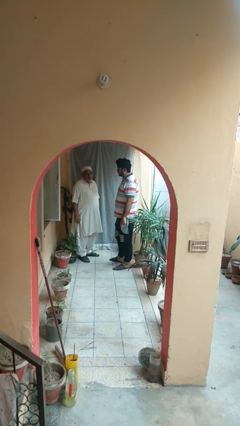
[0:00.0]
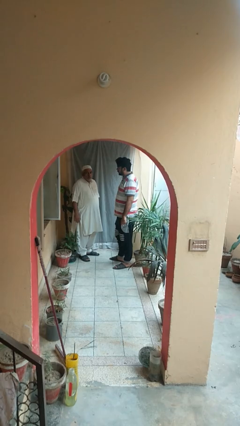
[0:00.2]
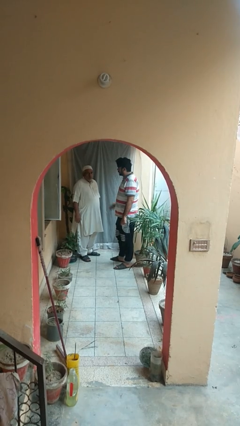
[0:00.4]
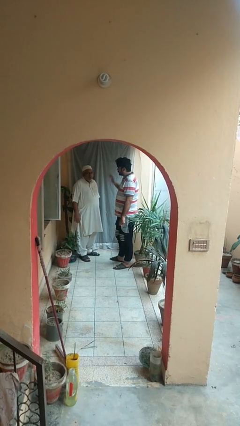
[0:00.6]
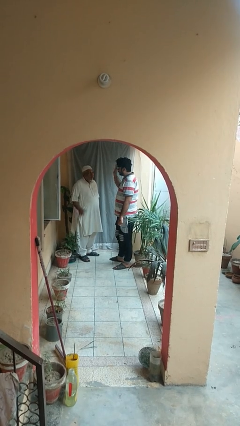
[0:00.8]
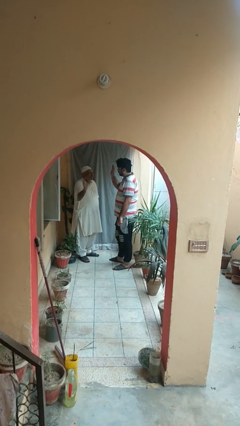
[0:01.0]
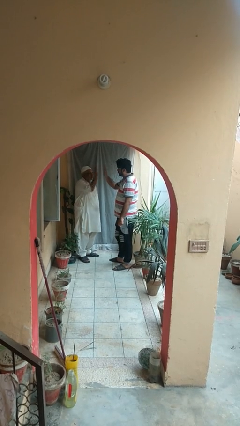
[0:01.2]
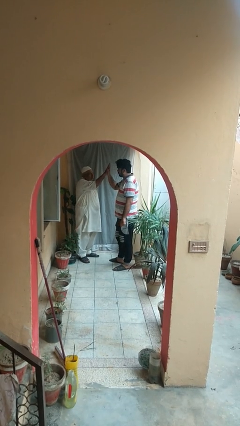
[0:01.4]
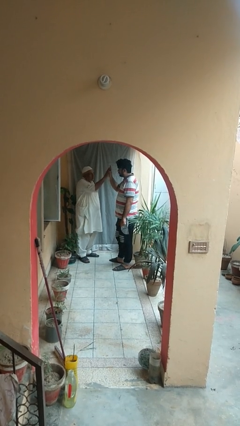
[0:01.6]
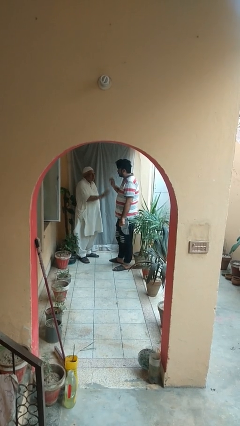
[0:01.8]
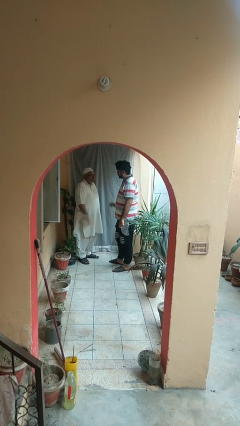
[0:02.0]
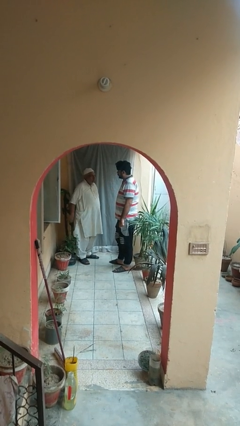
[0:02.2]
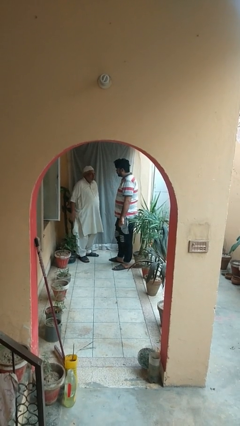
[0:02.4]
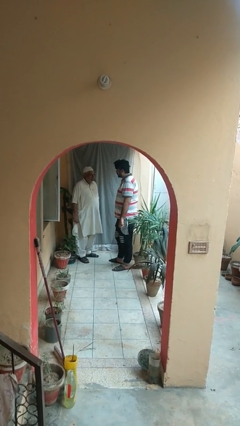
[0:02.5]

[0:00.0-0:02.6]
person highfives hand

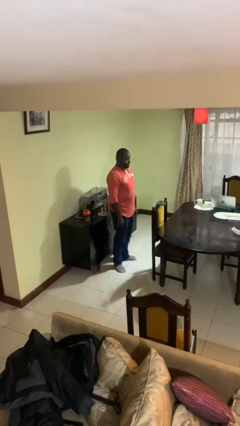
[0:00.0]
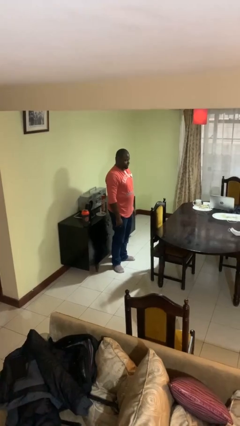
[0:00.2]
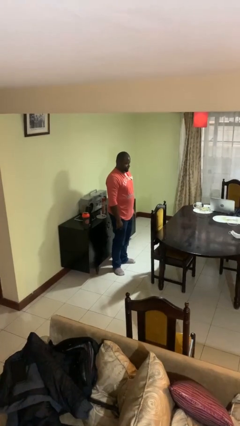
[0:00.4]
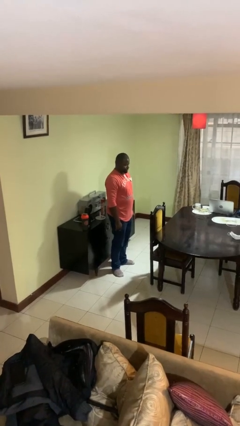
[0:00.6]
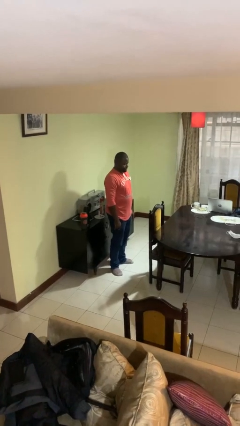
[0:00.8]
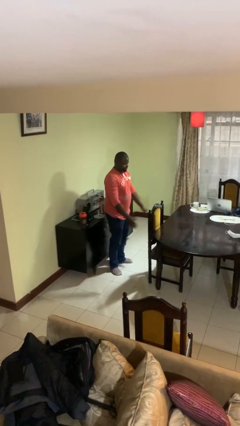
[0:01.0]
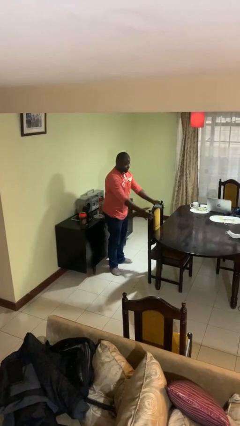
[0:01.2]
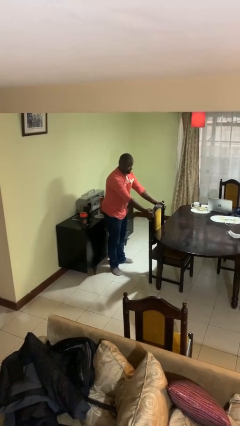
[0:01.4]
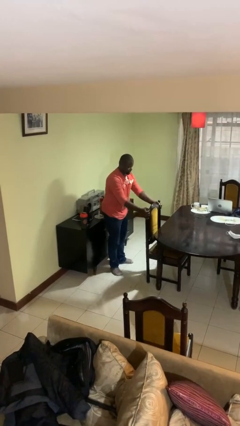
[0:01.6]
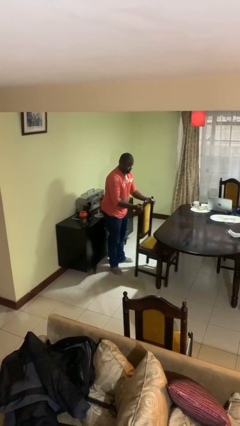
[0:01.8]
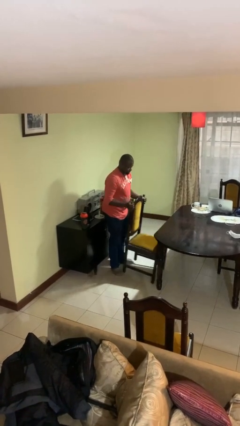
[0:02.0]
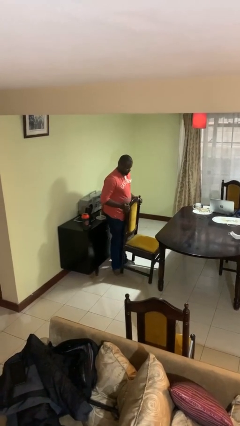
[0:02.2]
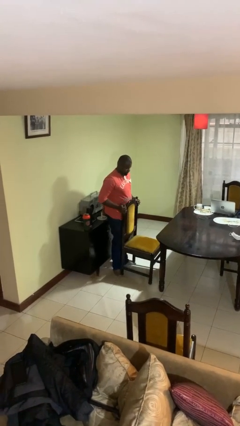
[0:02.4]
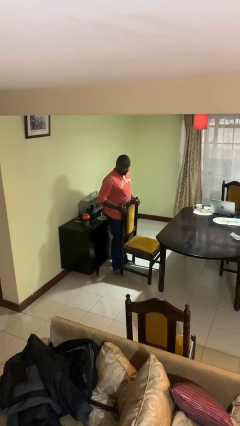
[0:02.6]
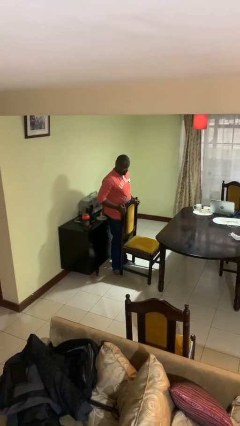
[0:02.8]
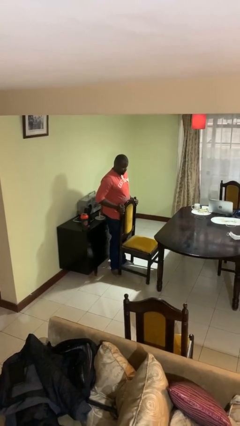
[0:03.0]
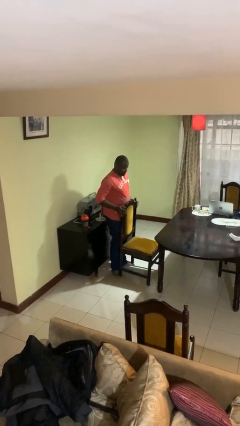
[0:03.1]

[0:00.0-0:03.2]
person pulls out chair

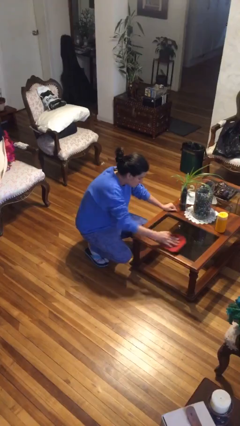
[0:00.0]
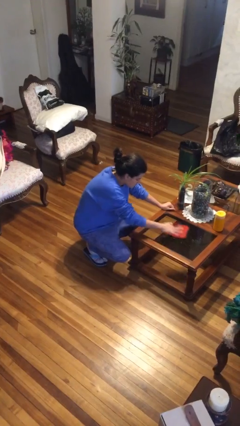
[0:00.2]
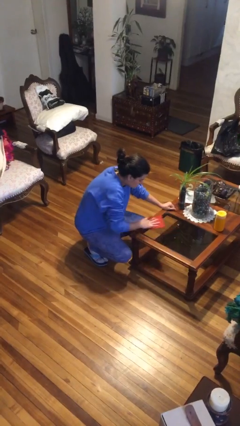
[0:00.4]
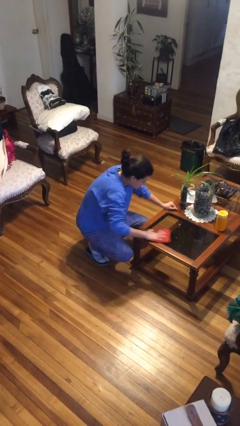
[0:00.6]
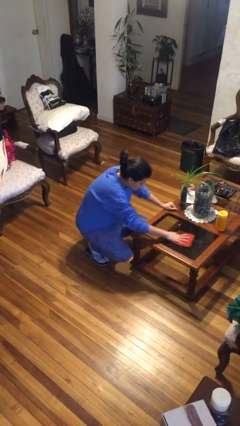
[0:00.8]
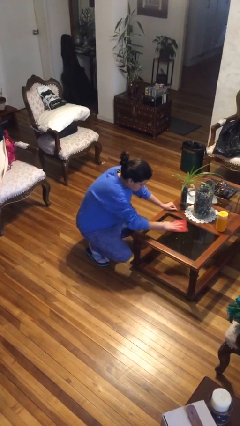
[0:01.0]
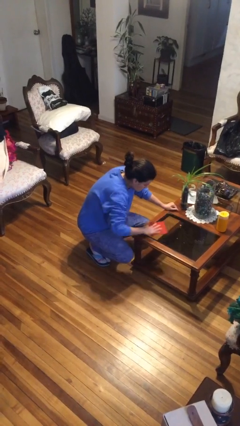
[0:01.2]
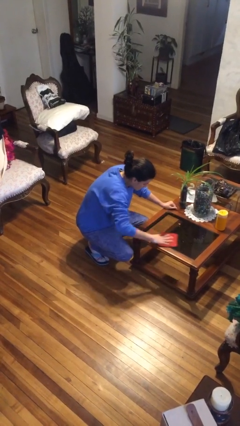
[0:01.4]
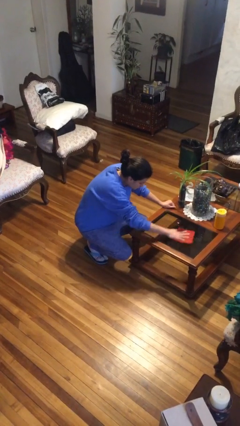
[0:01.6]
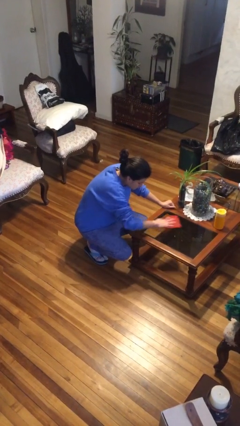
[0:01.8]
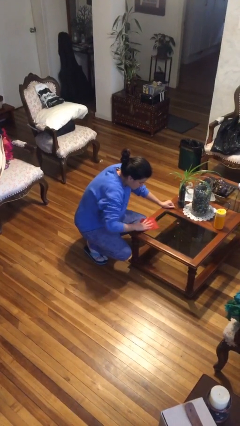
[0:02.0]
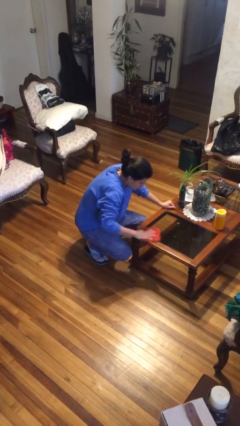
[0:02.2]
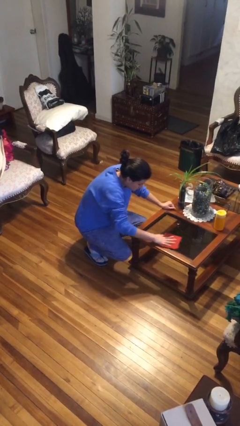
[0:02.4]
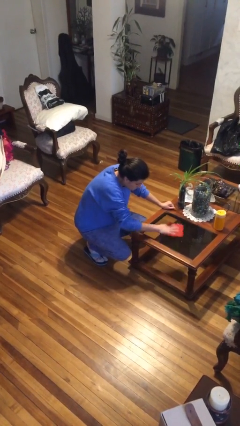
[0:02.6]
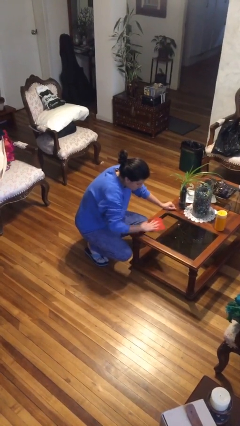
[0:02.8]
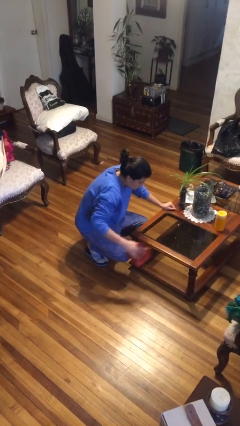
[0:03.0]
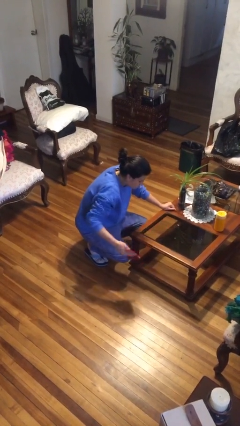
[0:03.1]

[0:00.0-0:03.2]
person cleans table with rag

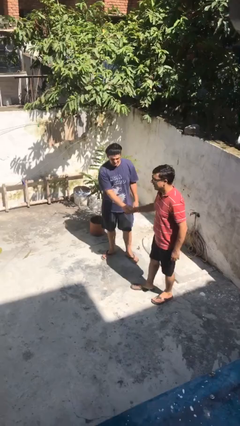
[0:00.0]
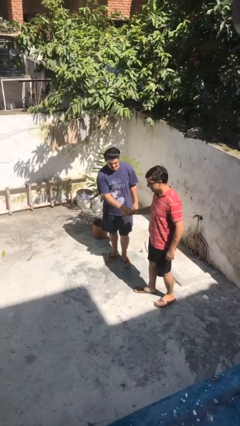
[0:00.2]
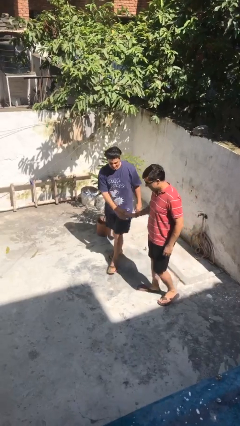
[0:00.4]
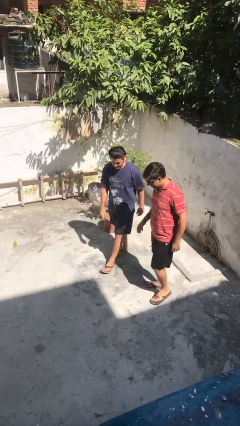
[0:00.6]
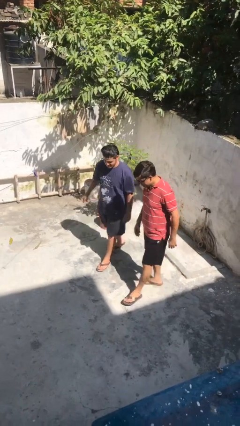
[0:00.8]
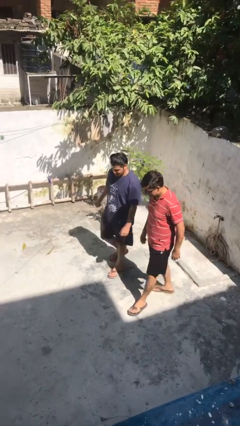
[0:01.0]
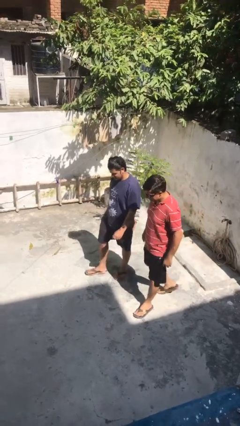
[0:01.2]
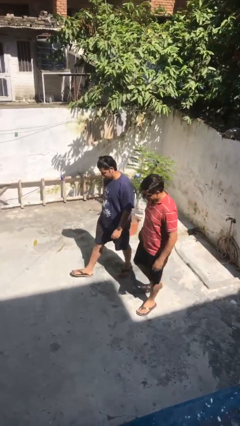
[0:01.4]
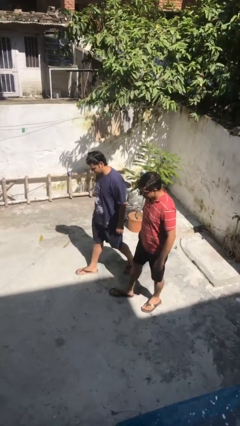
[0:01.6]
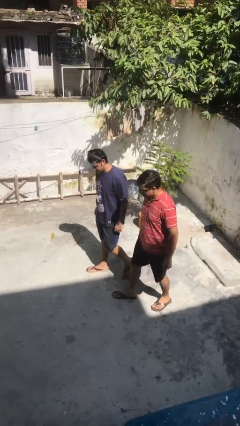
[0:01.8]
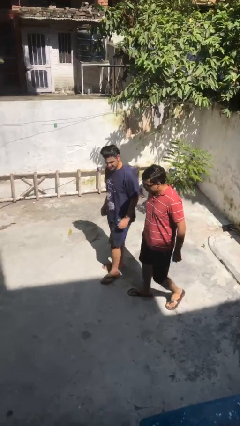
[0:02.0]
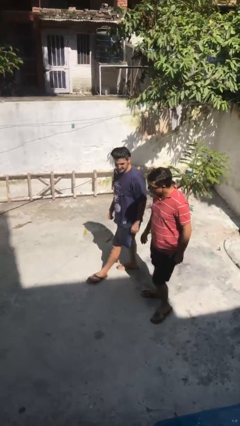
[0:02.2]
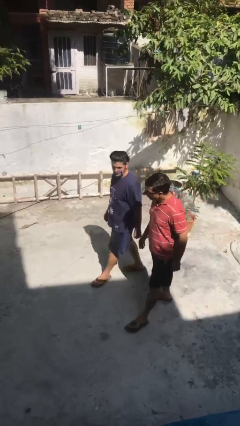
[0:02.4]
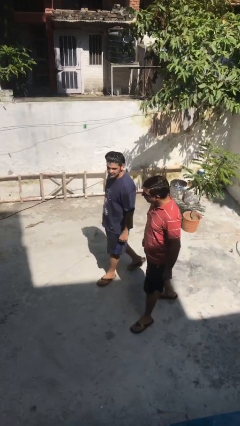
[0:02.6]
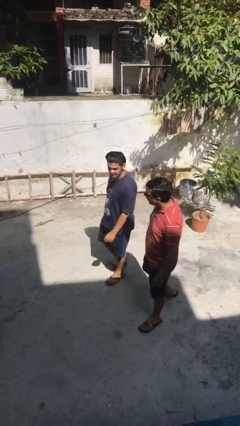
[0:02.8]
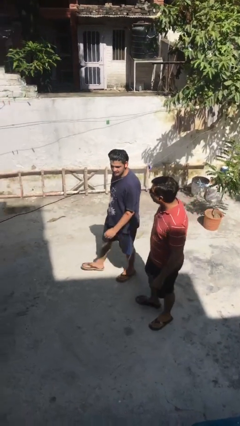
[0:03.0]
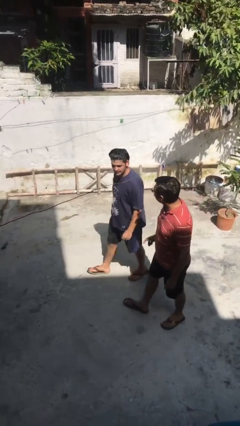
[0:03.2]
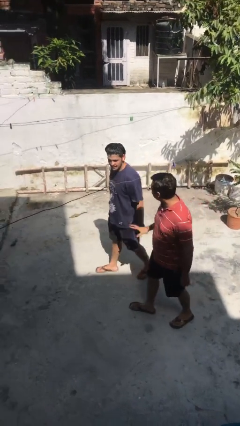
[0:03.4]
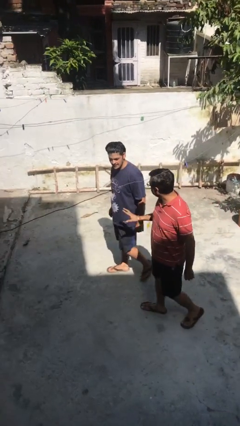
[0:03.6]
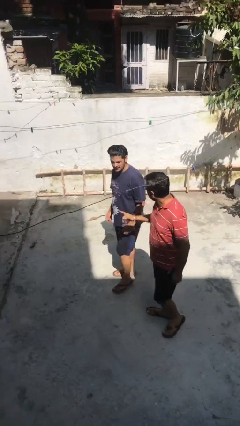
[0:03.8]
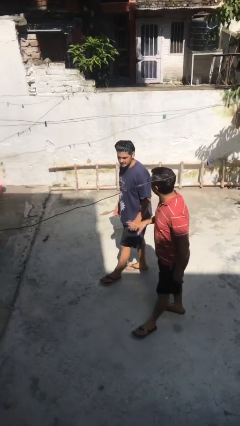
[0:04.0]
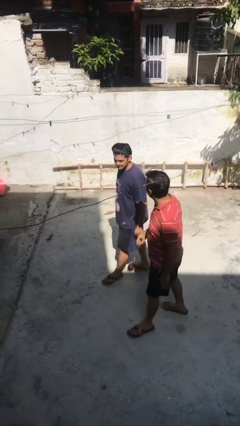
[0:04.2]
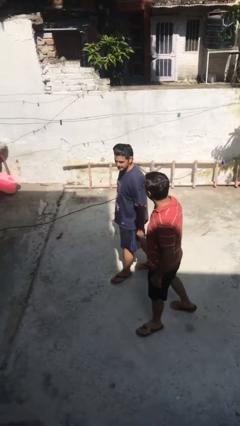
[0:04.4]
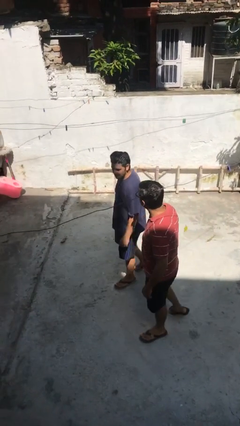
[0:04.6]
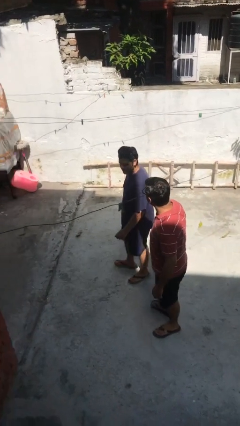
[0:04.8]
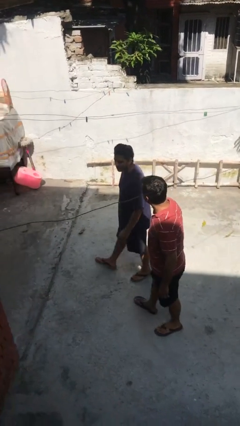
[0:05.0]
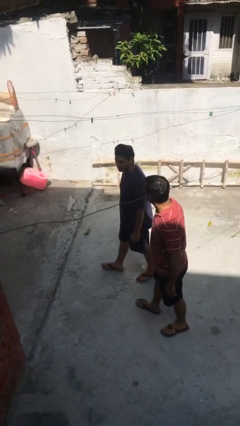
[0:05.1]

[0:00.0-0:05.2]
person talks to person

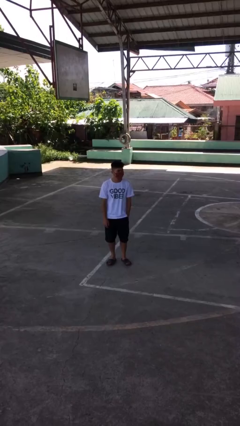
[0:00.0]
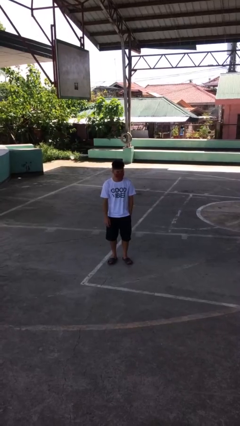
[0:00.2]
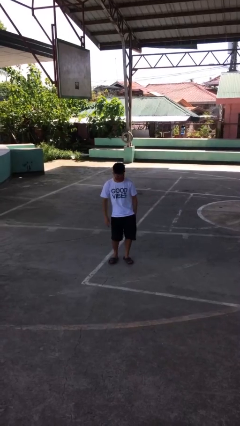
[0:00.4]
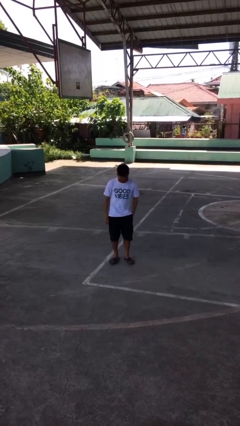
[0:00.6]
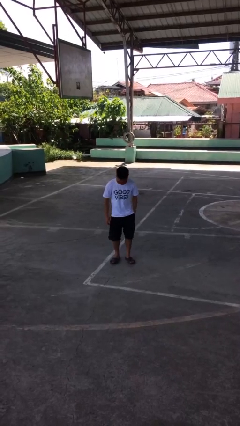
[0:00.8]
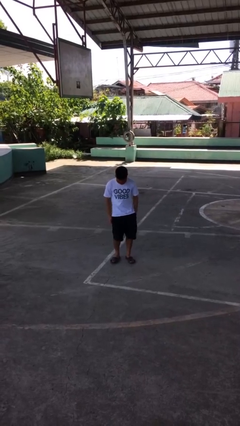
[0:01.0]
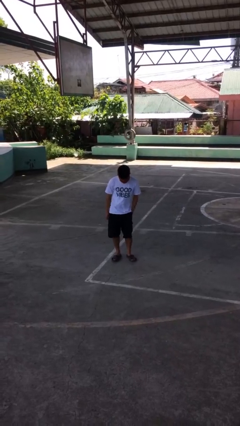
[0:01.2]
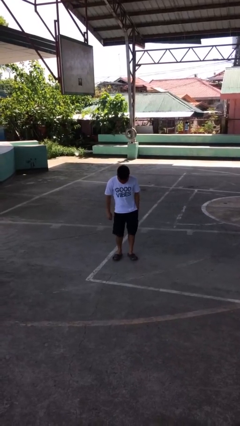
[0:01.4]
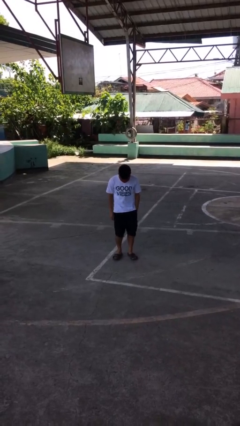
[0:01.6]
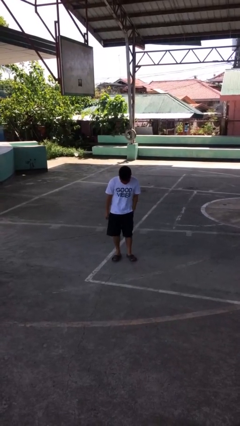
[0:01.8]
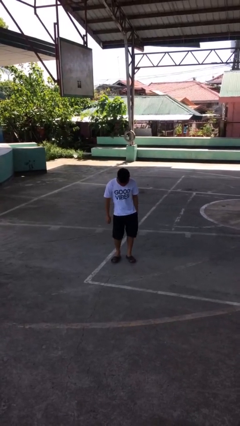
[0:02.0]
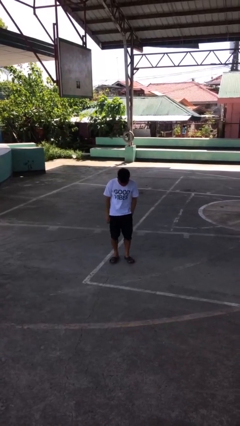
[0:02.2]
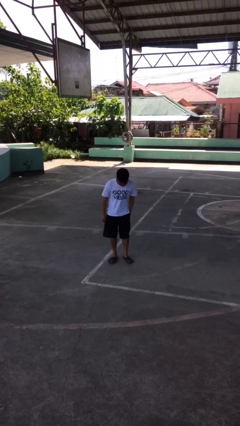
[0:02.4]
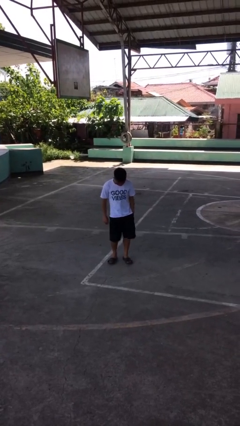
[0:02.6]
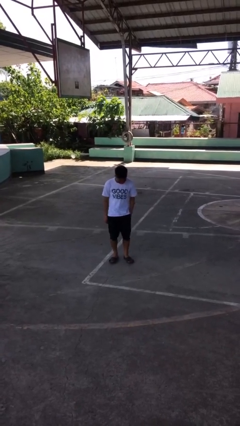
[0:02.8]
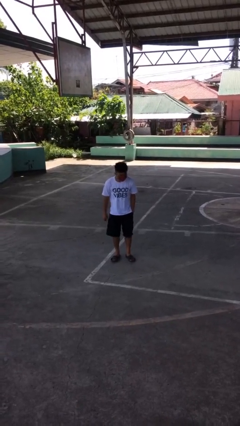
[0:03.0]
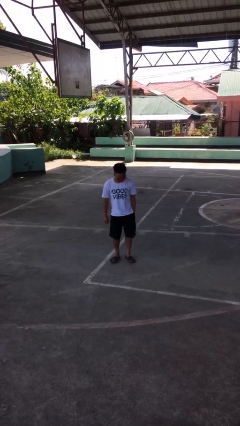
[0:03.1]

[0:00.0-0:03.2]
person wiggles hips

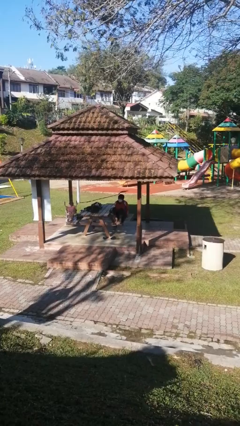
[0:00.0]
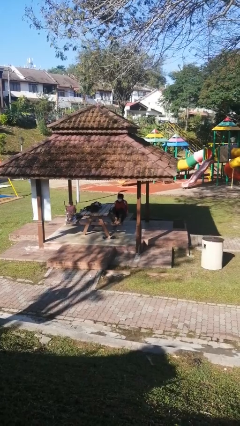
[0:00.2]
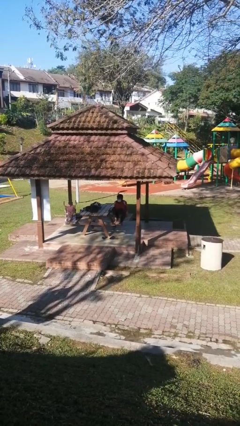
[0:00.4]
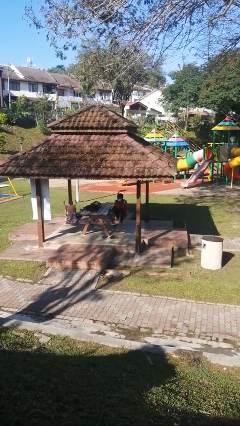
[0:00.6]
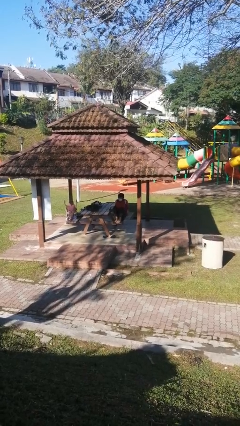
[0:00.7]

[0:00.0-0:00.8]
person puts feet up
